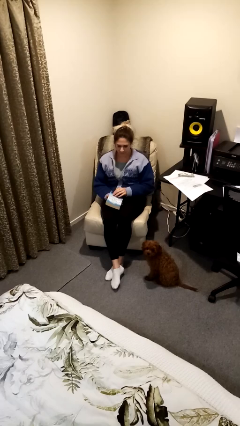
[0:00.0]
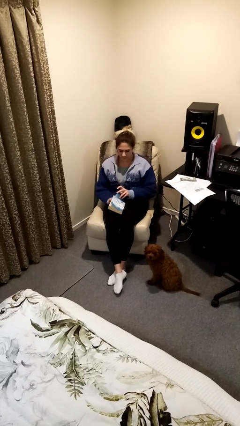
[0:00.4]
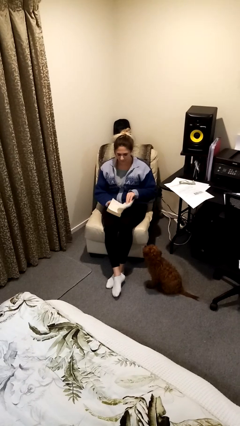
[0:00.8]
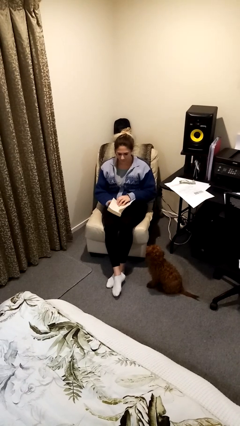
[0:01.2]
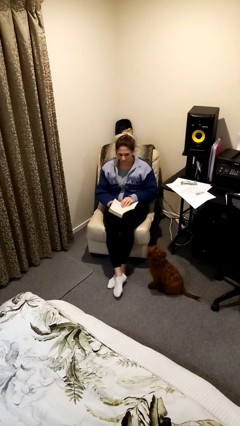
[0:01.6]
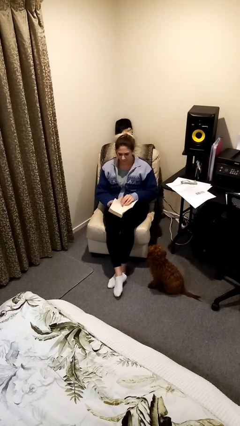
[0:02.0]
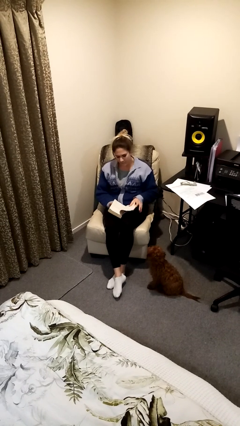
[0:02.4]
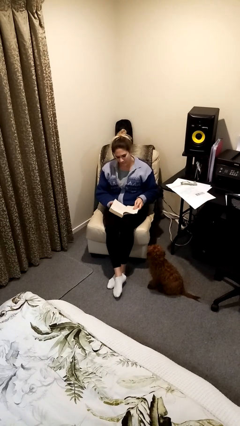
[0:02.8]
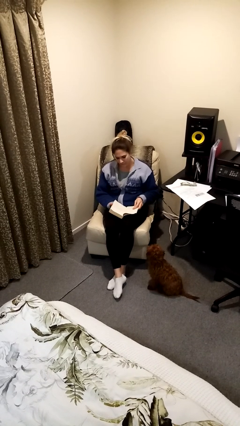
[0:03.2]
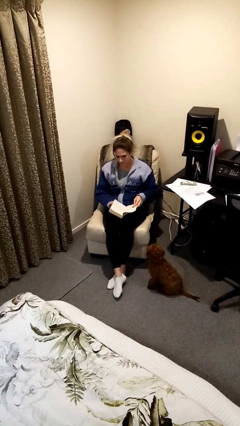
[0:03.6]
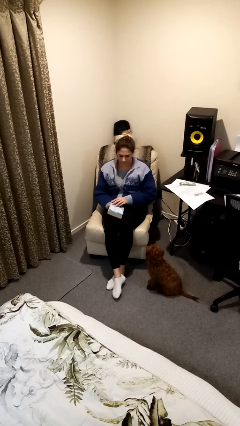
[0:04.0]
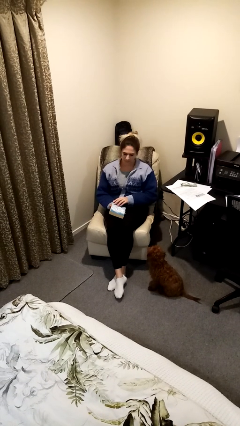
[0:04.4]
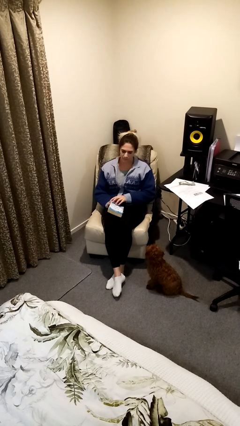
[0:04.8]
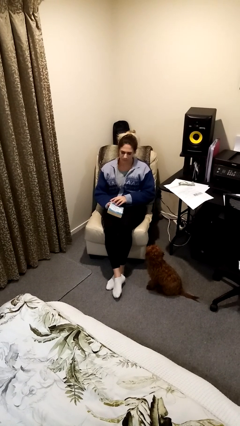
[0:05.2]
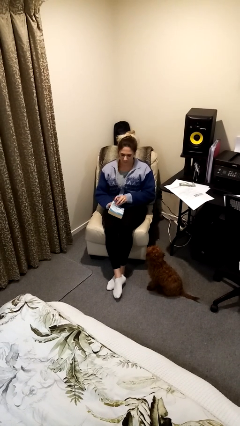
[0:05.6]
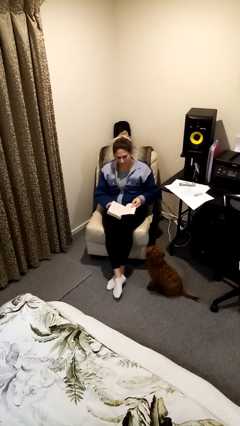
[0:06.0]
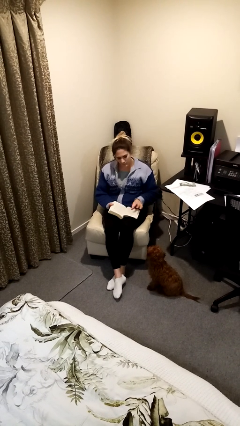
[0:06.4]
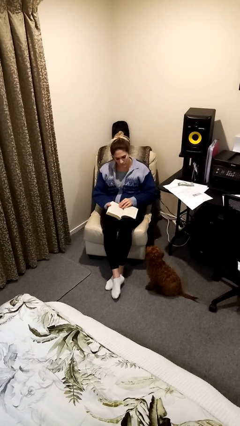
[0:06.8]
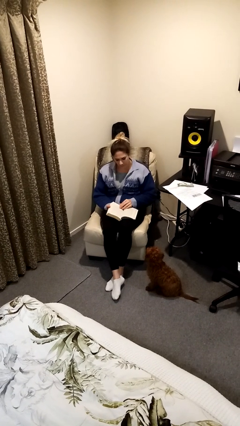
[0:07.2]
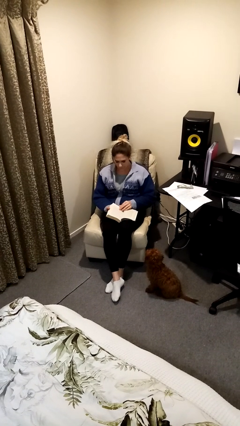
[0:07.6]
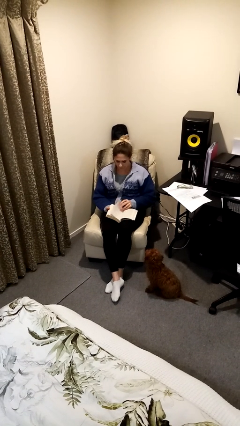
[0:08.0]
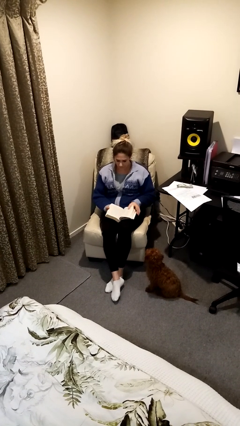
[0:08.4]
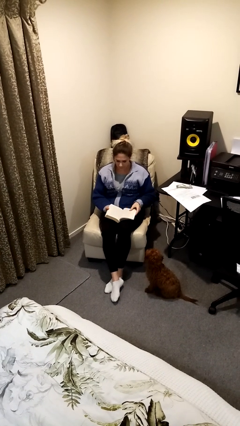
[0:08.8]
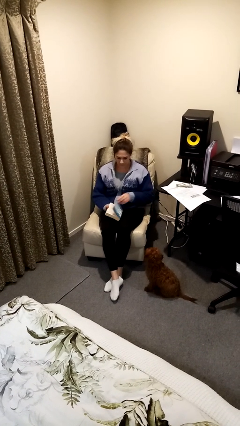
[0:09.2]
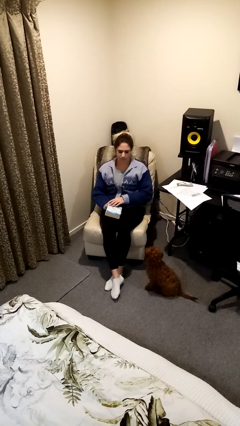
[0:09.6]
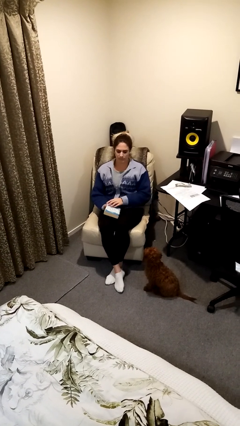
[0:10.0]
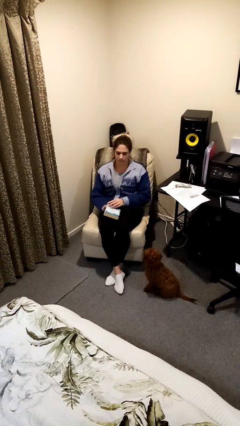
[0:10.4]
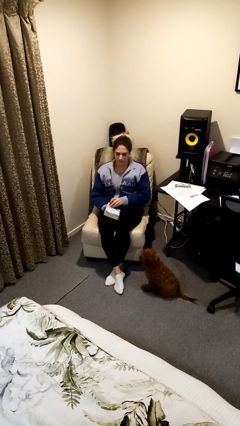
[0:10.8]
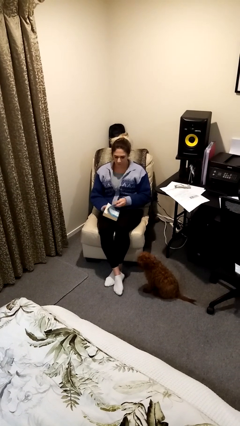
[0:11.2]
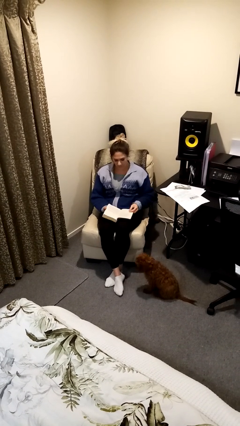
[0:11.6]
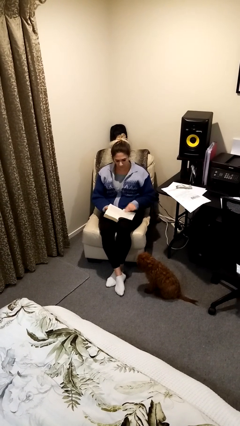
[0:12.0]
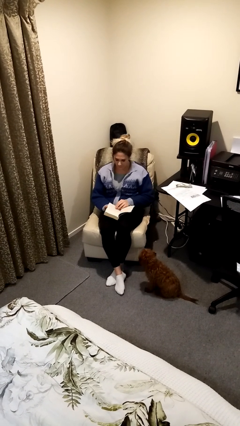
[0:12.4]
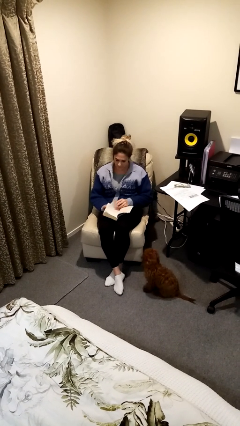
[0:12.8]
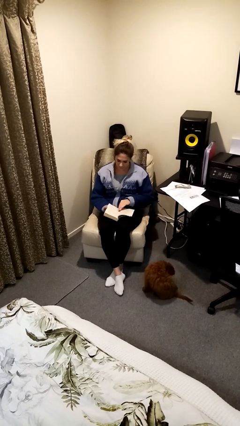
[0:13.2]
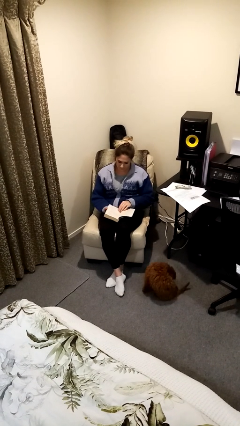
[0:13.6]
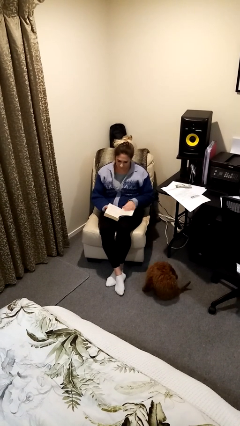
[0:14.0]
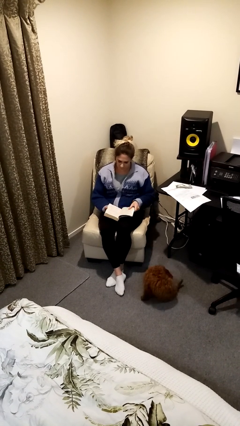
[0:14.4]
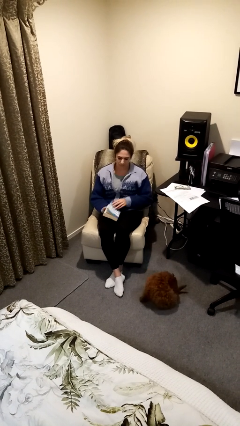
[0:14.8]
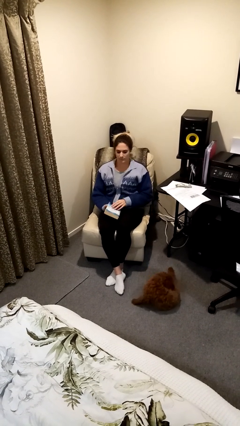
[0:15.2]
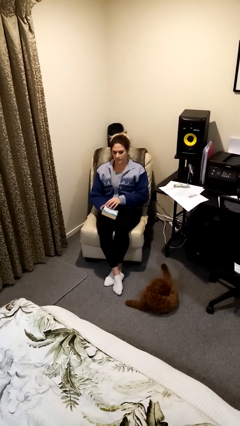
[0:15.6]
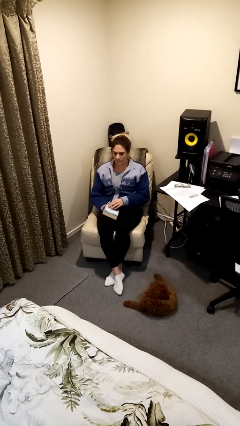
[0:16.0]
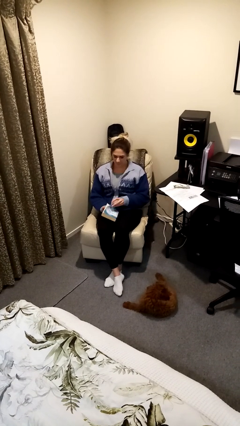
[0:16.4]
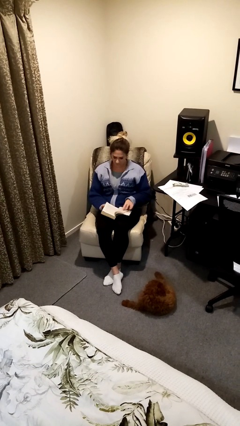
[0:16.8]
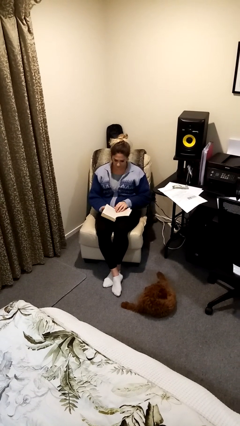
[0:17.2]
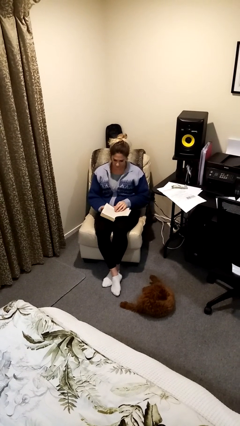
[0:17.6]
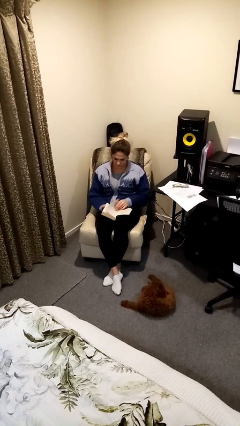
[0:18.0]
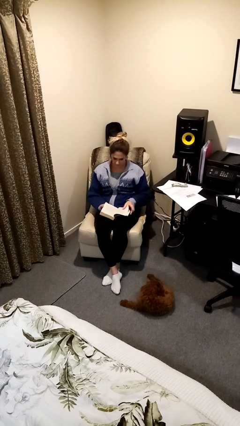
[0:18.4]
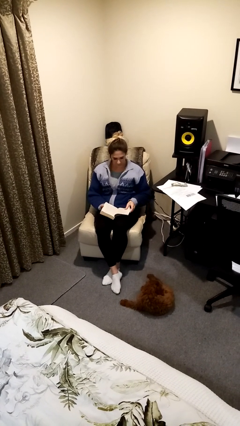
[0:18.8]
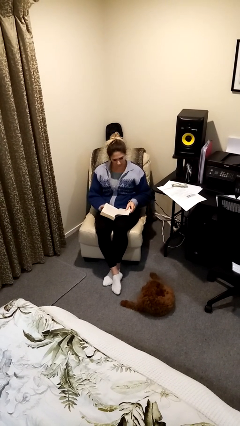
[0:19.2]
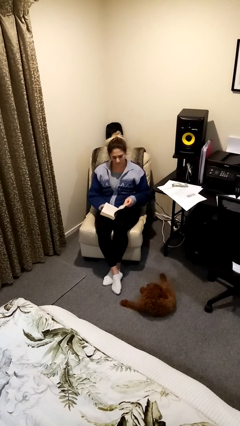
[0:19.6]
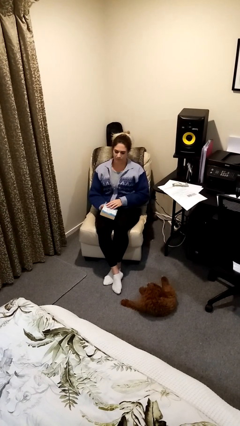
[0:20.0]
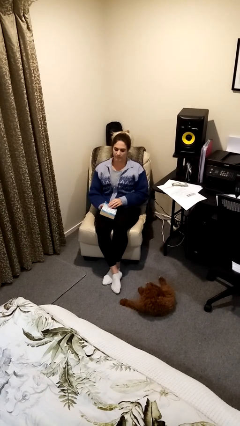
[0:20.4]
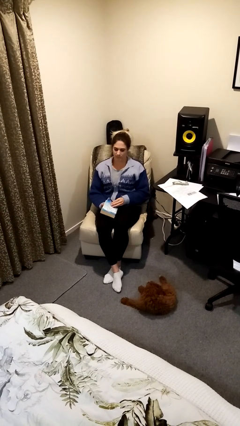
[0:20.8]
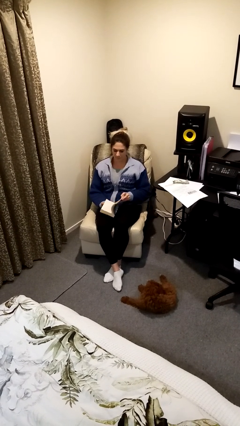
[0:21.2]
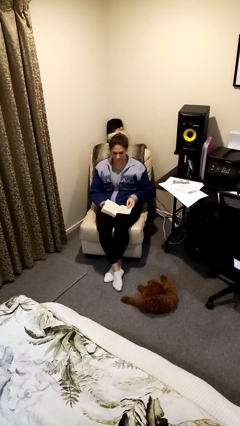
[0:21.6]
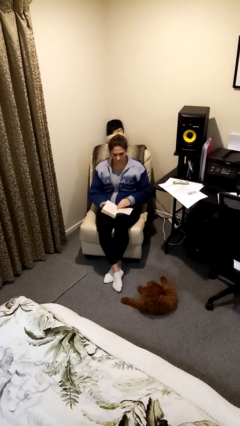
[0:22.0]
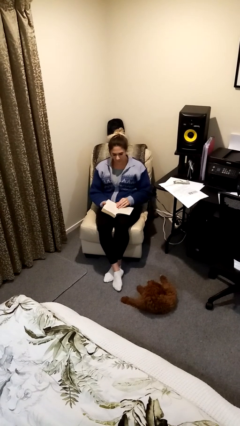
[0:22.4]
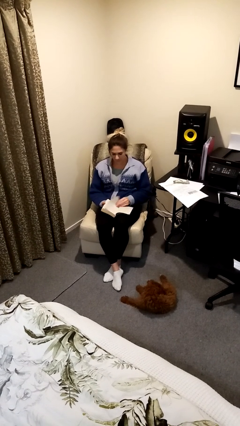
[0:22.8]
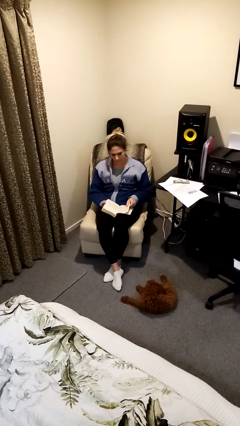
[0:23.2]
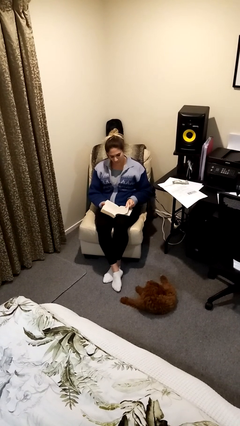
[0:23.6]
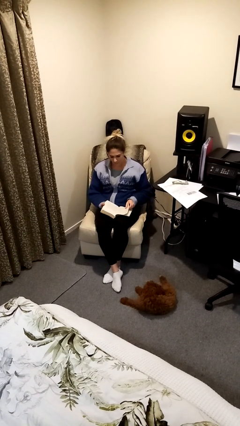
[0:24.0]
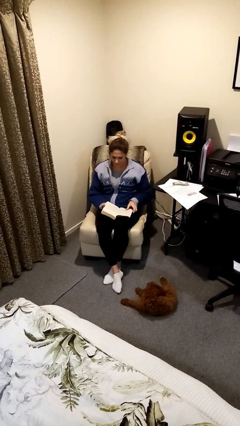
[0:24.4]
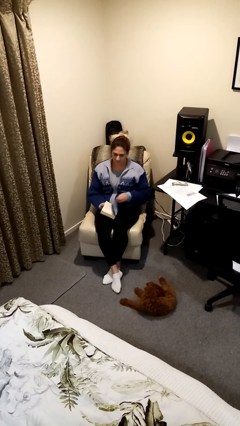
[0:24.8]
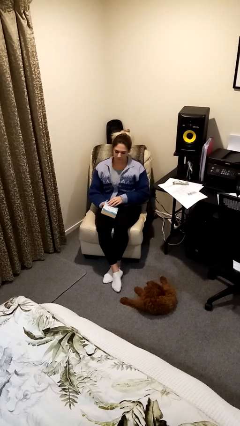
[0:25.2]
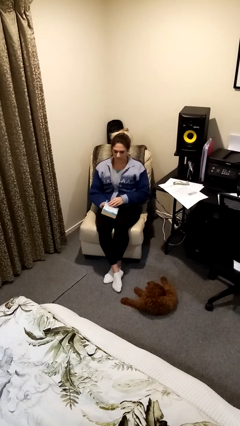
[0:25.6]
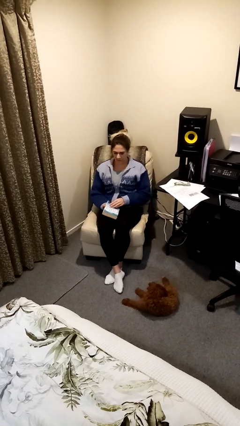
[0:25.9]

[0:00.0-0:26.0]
person reads book

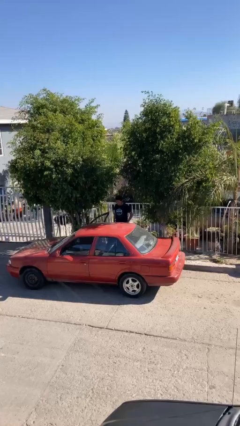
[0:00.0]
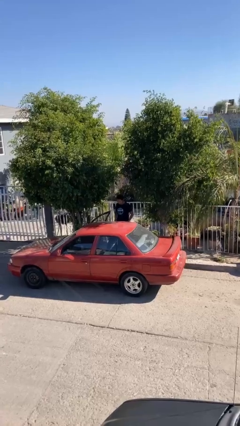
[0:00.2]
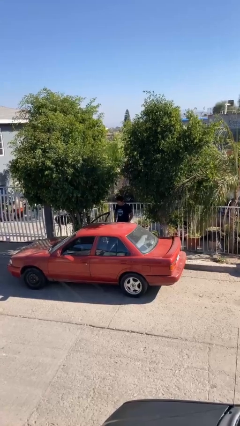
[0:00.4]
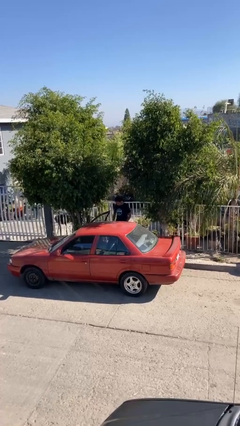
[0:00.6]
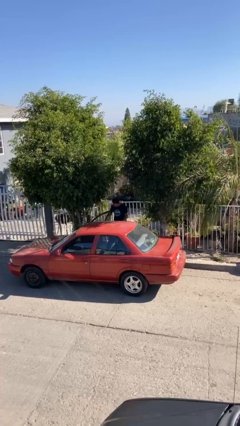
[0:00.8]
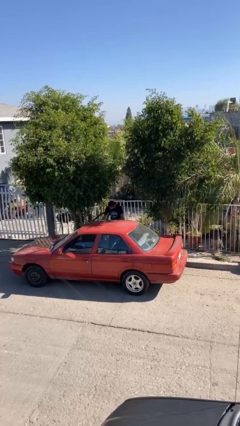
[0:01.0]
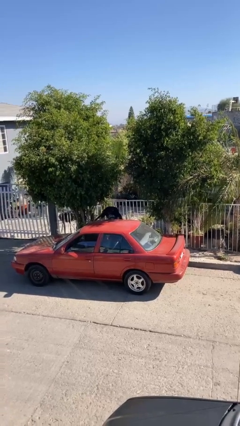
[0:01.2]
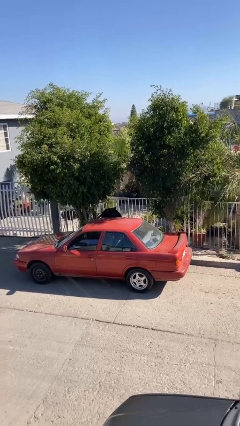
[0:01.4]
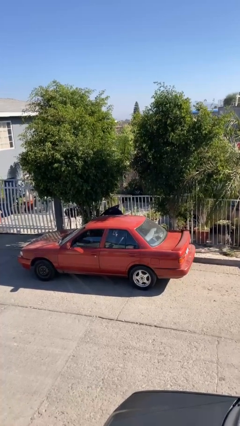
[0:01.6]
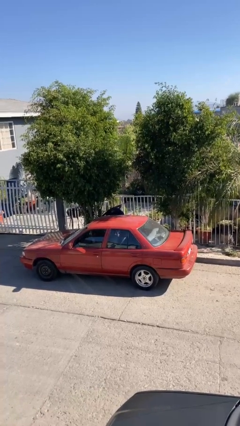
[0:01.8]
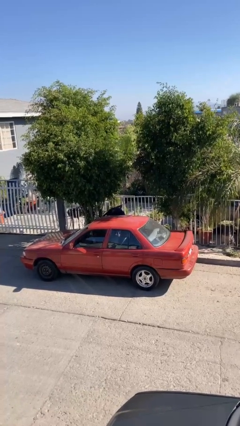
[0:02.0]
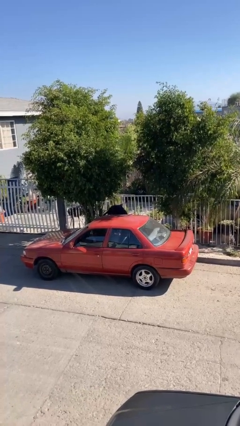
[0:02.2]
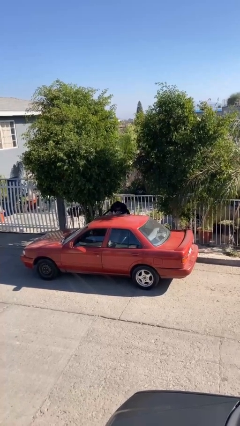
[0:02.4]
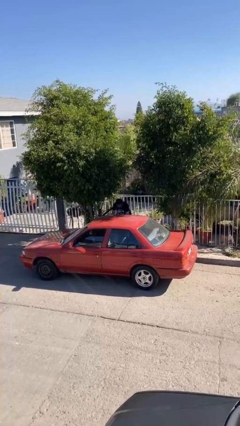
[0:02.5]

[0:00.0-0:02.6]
person unloads car

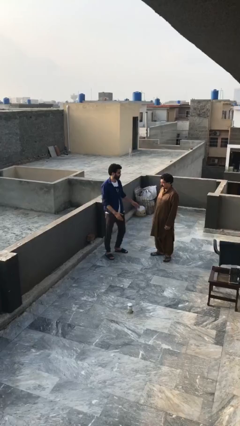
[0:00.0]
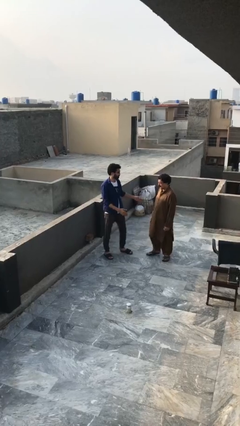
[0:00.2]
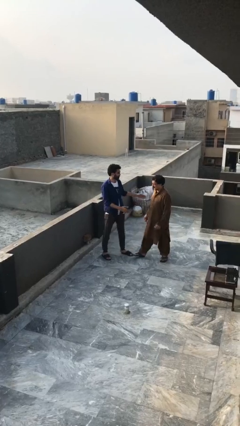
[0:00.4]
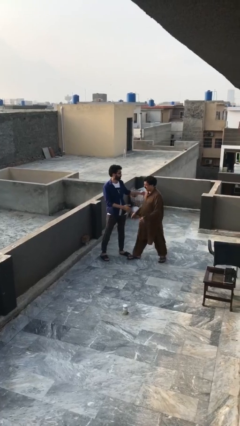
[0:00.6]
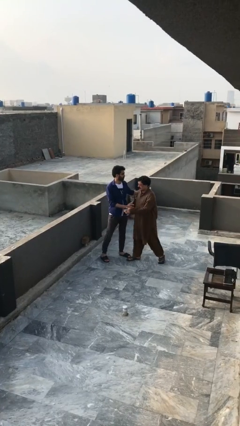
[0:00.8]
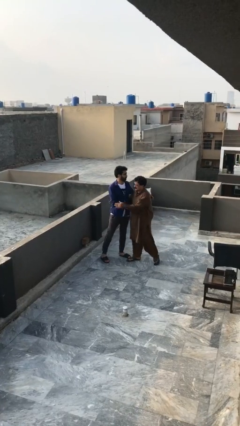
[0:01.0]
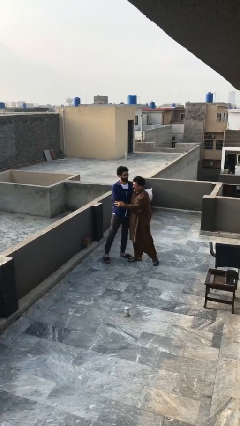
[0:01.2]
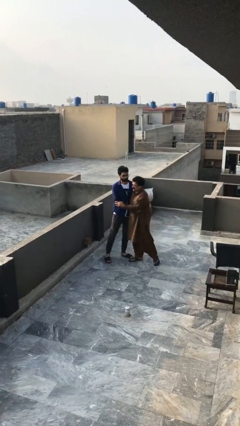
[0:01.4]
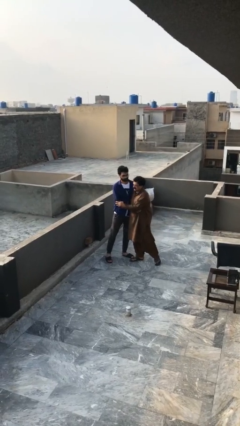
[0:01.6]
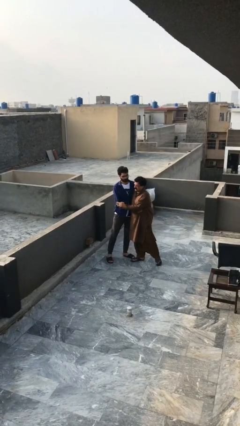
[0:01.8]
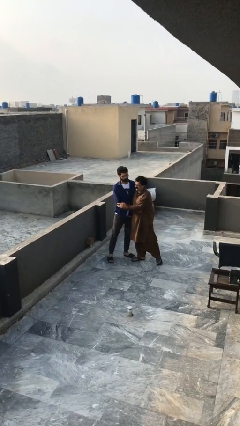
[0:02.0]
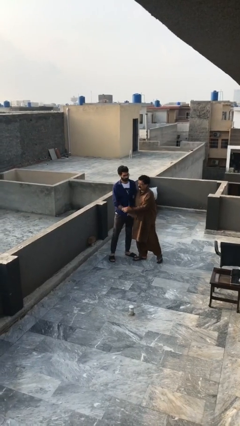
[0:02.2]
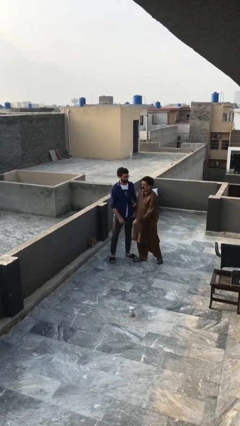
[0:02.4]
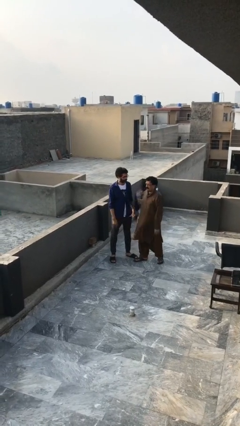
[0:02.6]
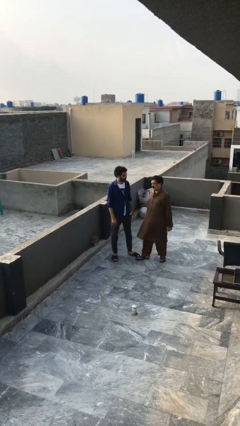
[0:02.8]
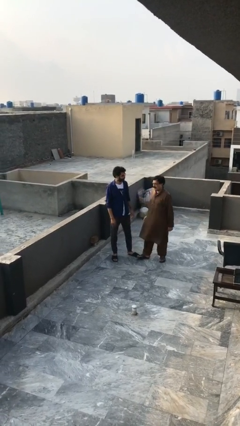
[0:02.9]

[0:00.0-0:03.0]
person embraces person
